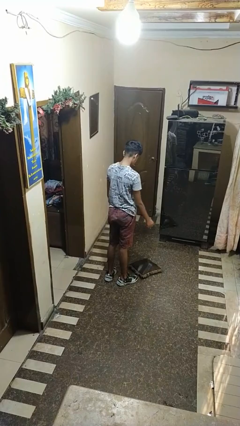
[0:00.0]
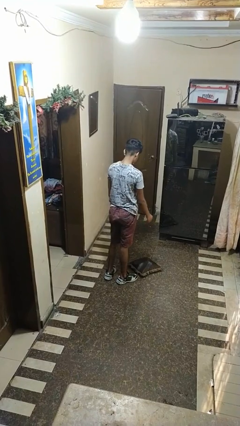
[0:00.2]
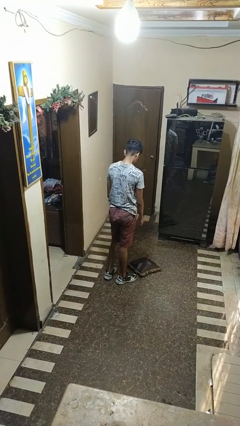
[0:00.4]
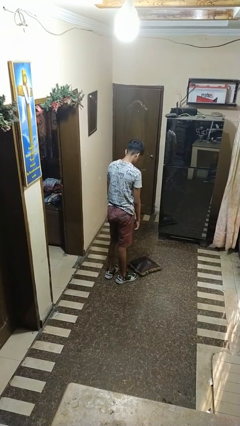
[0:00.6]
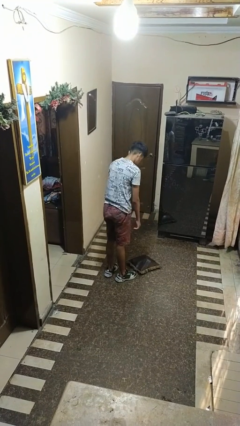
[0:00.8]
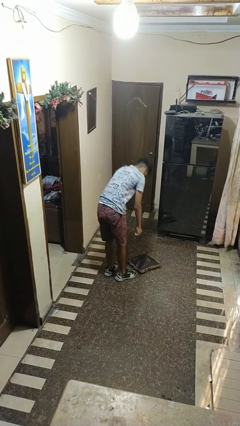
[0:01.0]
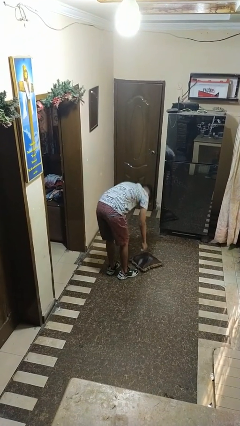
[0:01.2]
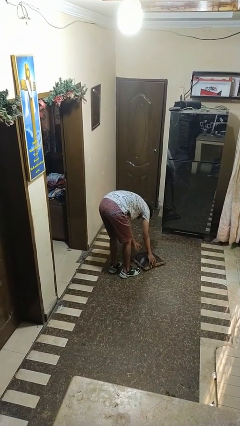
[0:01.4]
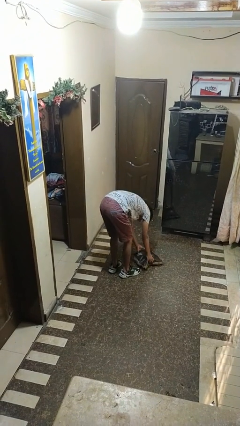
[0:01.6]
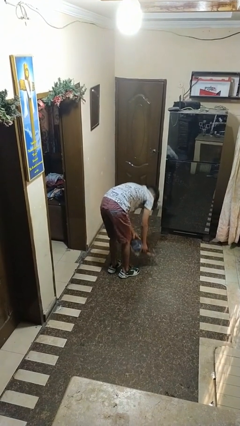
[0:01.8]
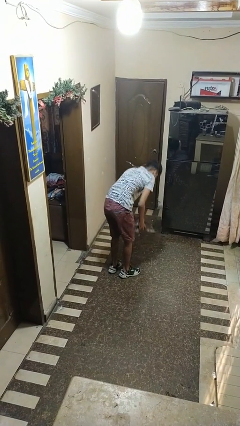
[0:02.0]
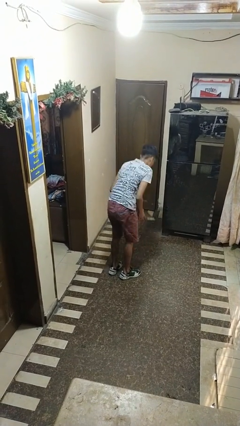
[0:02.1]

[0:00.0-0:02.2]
person picks up object from floor

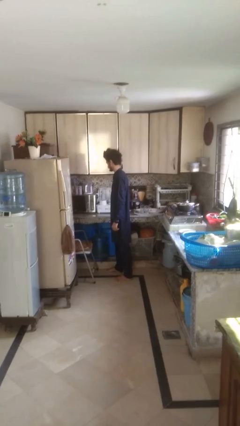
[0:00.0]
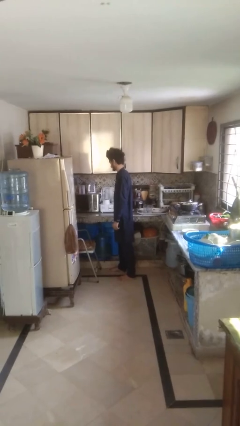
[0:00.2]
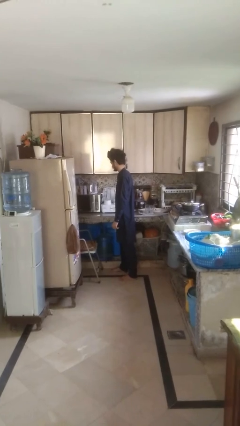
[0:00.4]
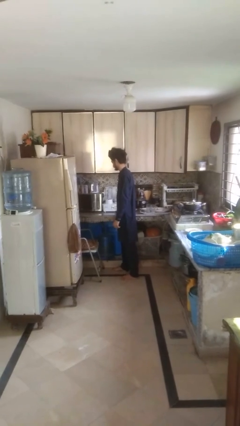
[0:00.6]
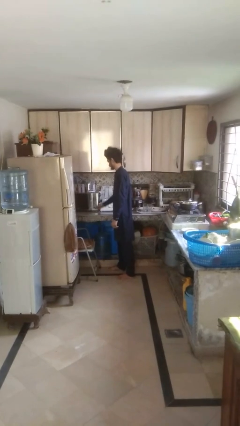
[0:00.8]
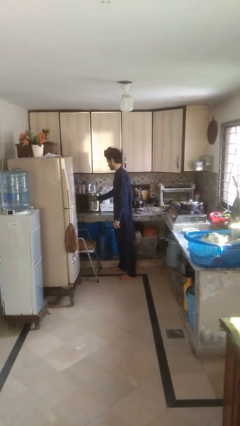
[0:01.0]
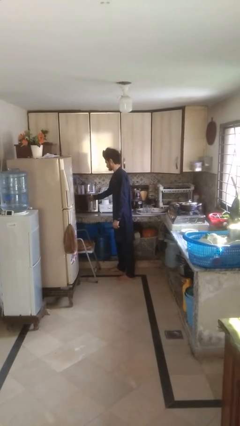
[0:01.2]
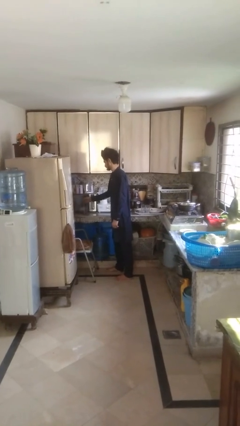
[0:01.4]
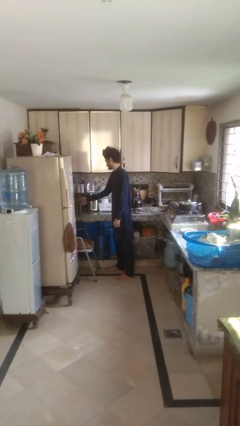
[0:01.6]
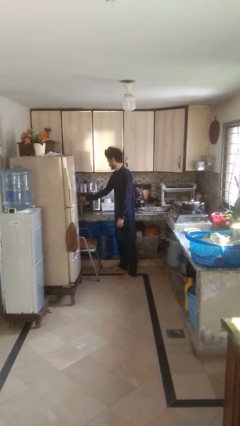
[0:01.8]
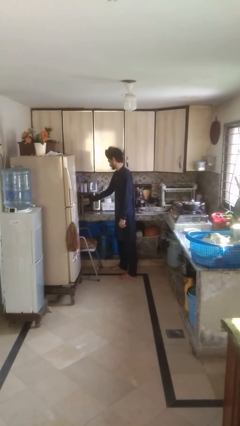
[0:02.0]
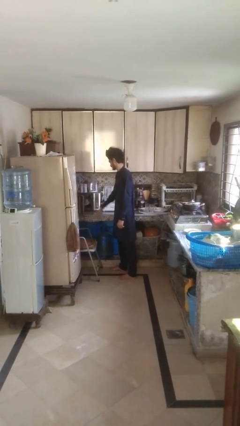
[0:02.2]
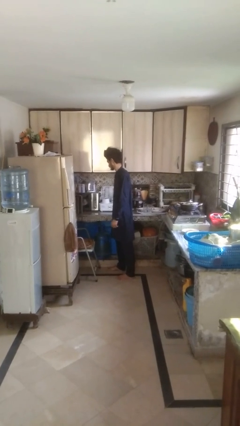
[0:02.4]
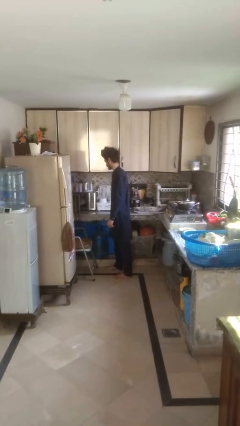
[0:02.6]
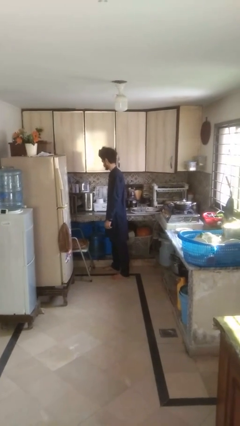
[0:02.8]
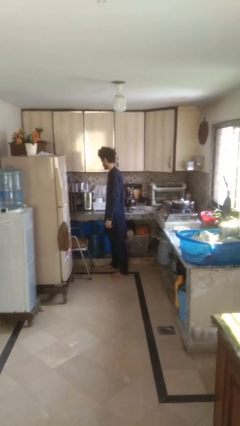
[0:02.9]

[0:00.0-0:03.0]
person opens oven door

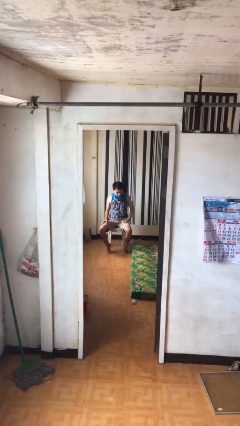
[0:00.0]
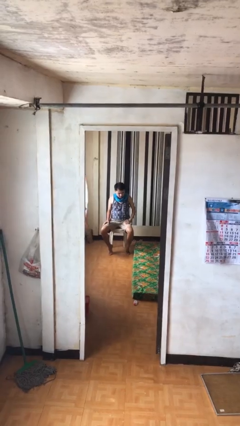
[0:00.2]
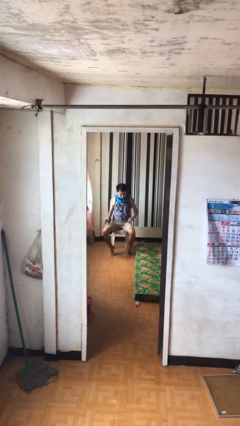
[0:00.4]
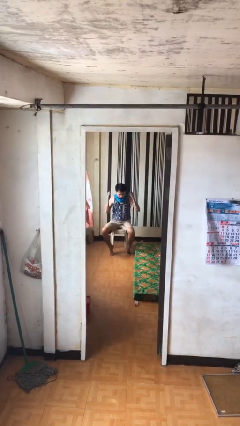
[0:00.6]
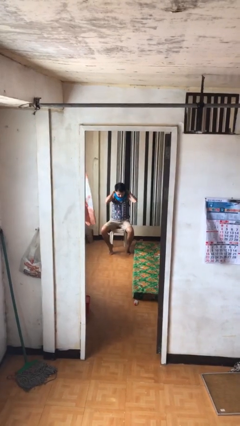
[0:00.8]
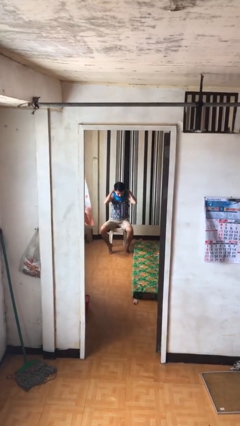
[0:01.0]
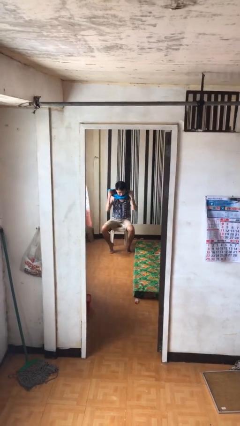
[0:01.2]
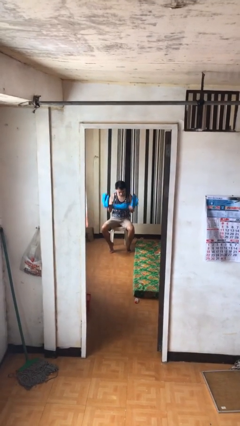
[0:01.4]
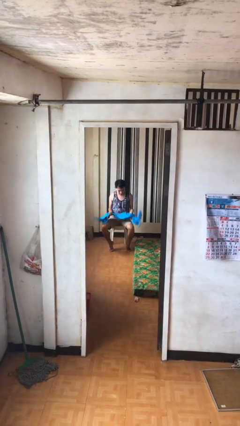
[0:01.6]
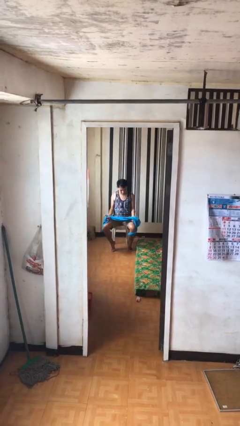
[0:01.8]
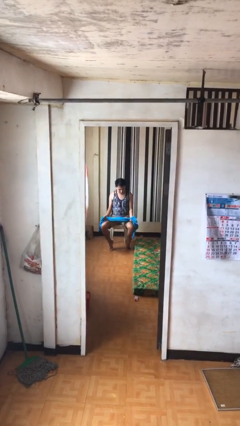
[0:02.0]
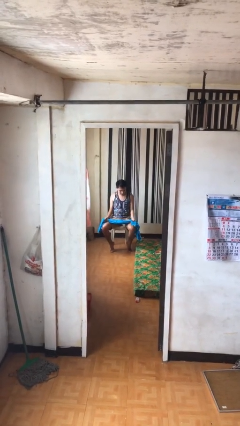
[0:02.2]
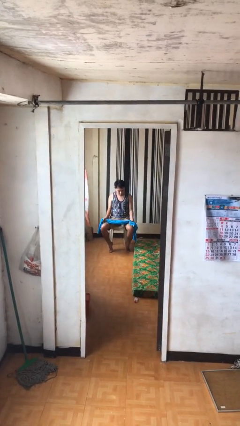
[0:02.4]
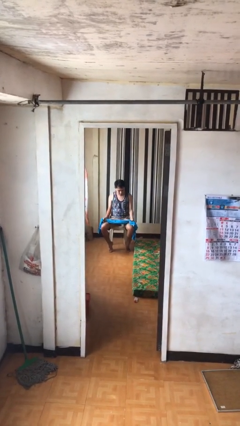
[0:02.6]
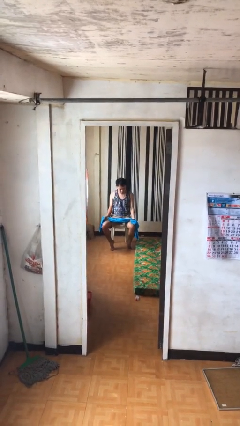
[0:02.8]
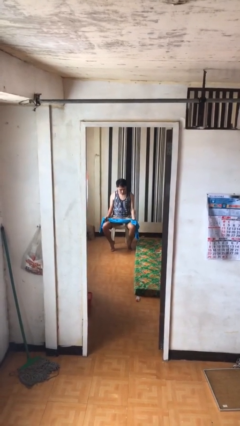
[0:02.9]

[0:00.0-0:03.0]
person takes off scarf

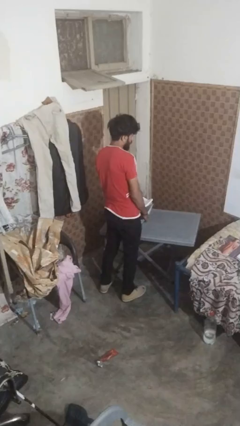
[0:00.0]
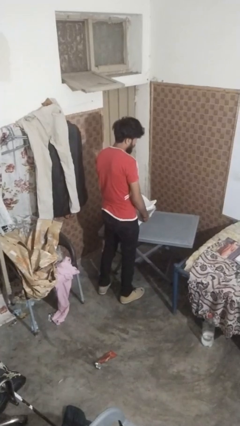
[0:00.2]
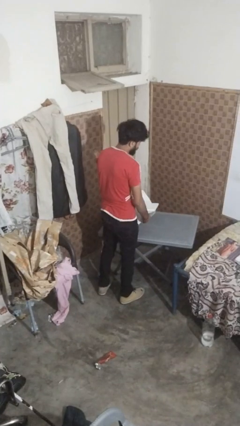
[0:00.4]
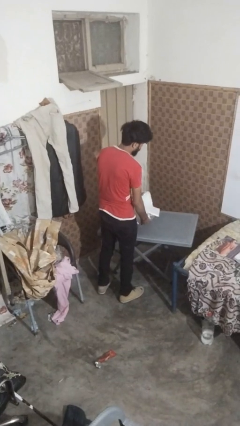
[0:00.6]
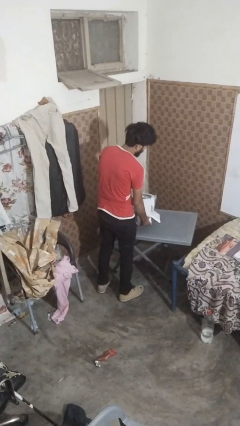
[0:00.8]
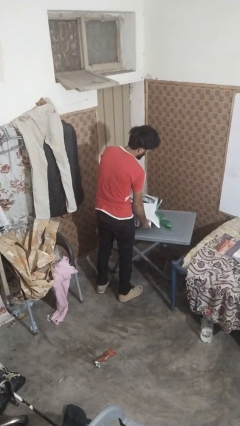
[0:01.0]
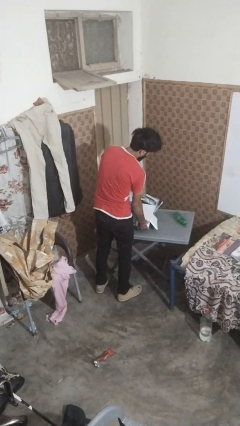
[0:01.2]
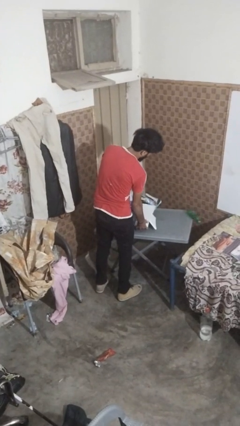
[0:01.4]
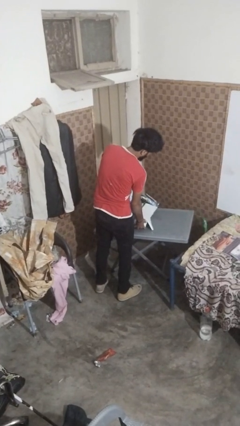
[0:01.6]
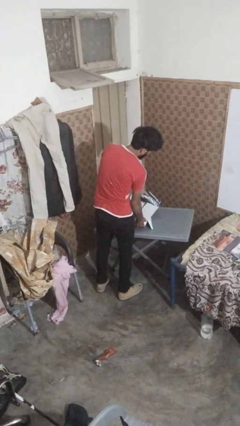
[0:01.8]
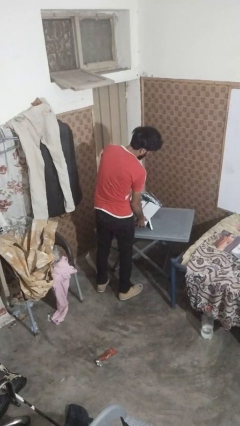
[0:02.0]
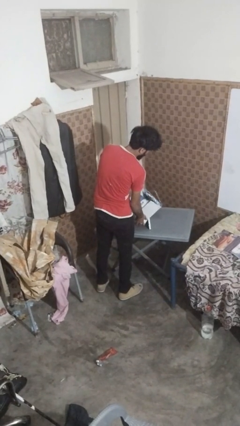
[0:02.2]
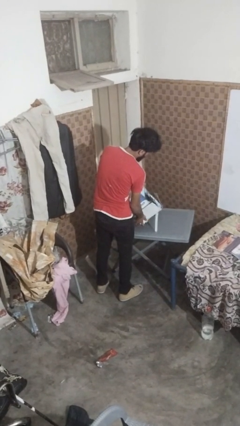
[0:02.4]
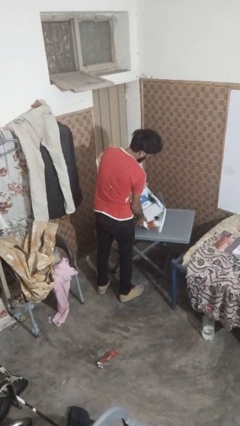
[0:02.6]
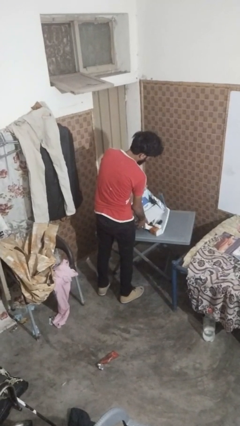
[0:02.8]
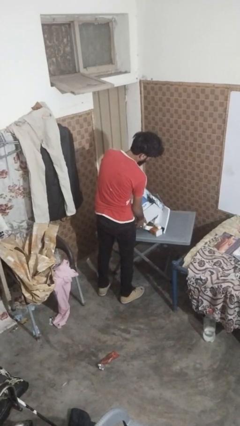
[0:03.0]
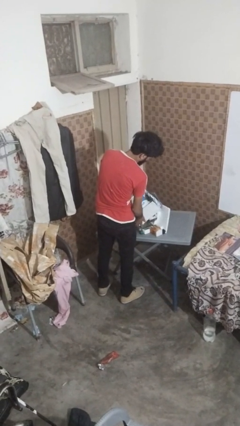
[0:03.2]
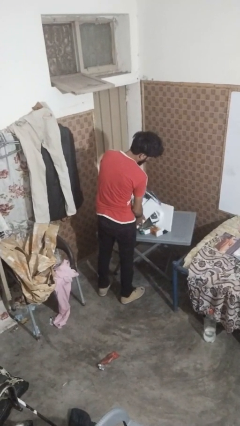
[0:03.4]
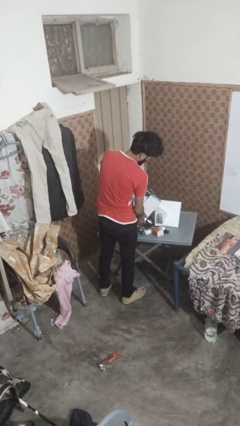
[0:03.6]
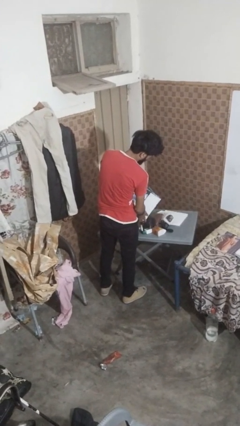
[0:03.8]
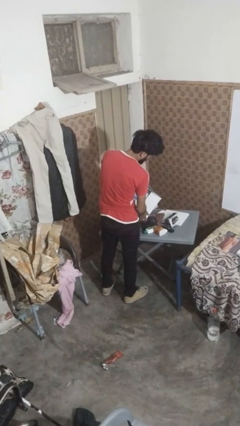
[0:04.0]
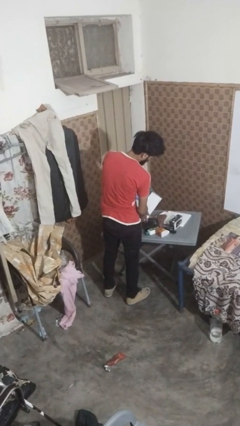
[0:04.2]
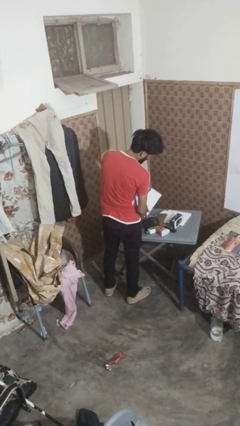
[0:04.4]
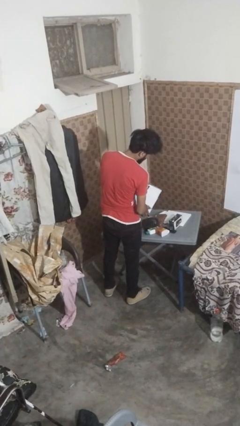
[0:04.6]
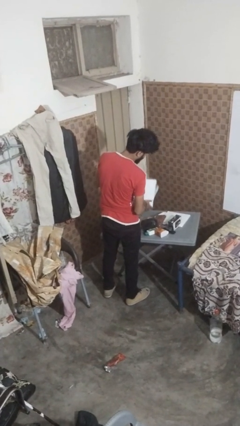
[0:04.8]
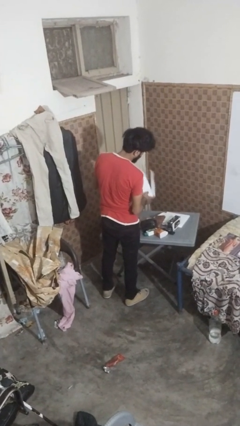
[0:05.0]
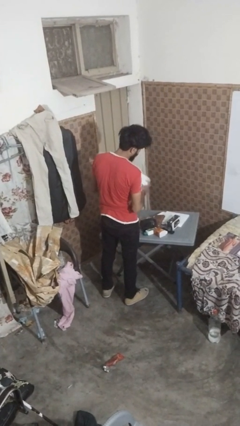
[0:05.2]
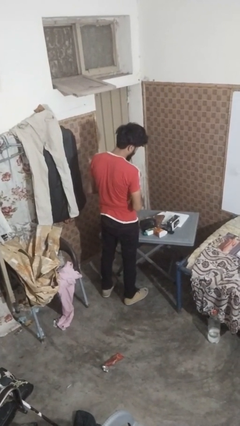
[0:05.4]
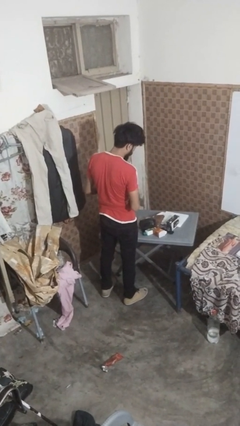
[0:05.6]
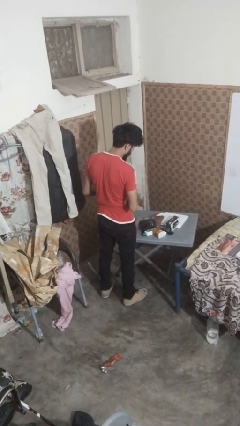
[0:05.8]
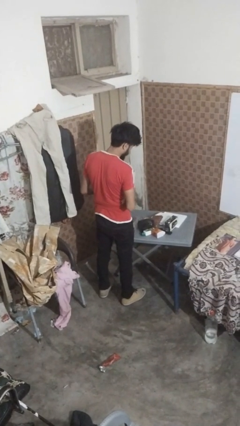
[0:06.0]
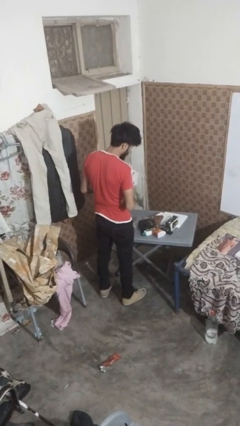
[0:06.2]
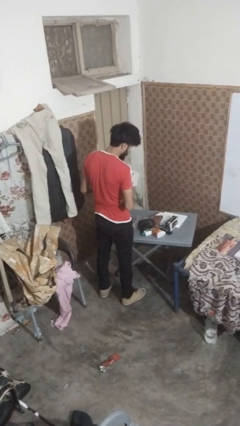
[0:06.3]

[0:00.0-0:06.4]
person unloads box onto table

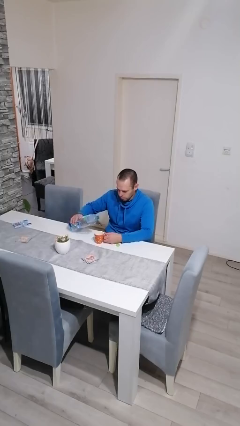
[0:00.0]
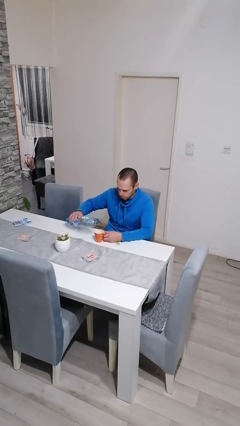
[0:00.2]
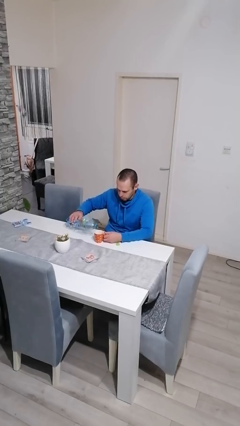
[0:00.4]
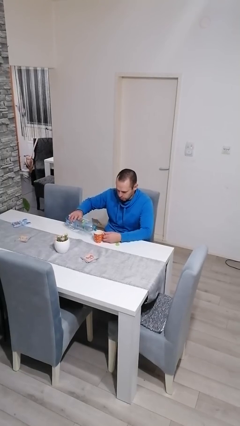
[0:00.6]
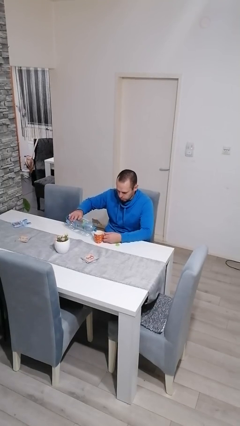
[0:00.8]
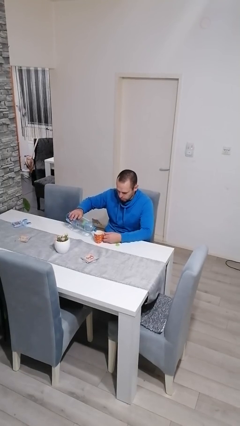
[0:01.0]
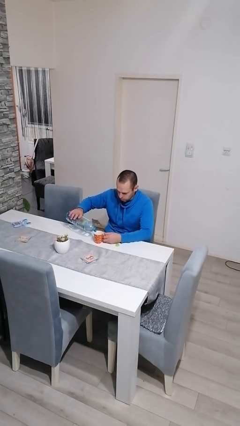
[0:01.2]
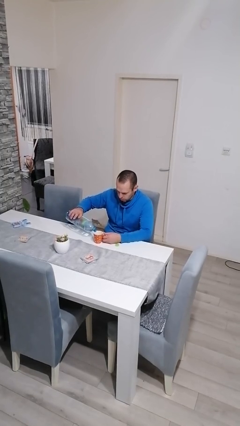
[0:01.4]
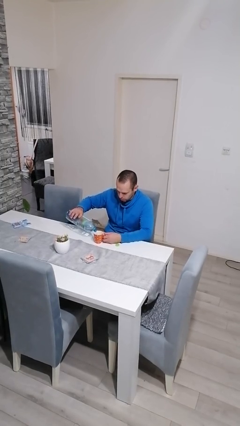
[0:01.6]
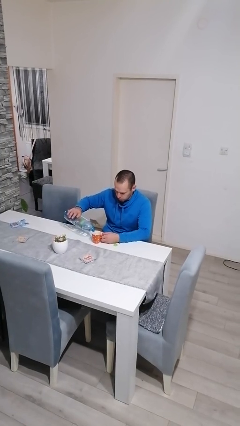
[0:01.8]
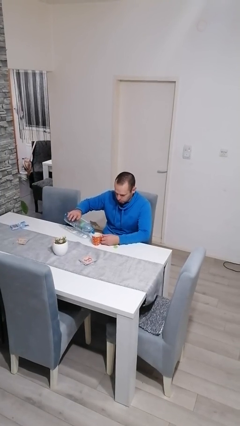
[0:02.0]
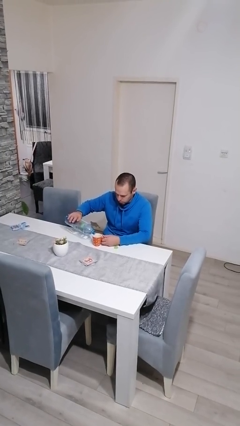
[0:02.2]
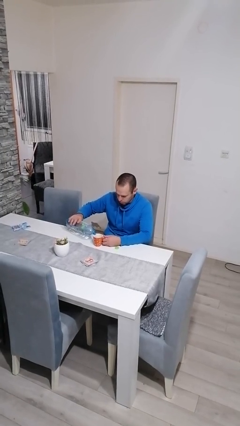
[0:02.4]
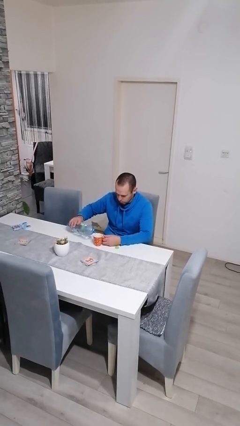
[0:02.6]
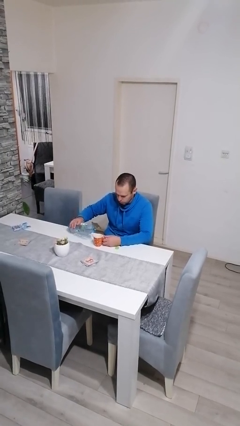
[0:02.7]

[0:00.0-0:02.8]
person pours liquid into cup
